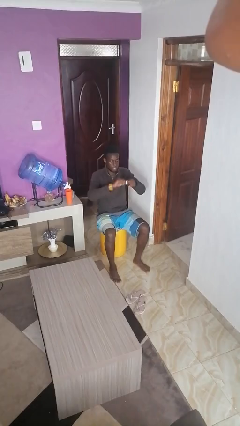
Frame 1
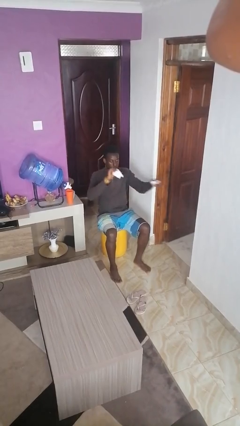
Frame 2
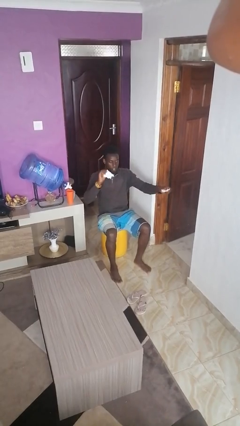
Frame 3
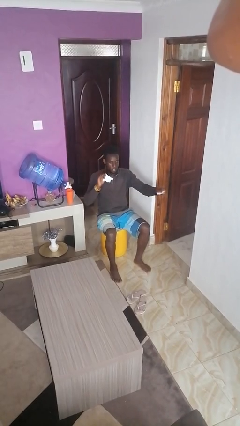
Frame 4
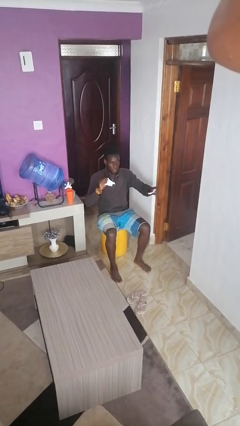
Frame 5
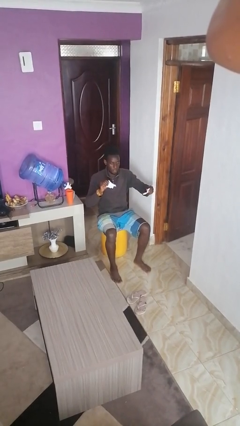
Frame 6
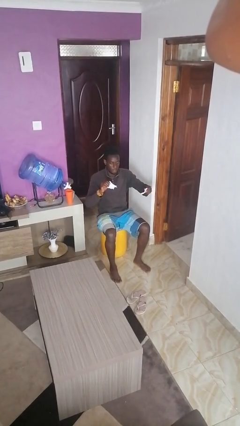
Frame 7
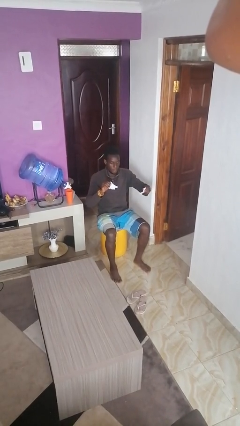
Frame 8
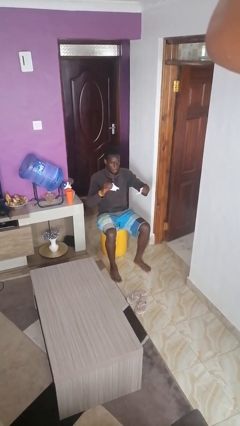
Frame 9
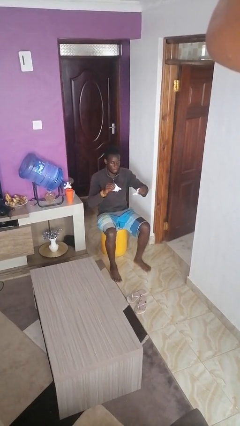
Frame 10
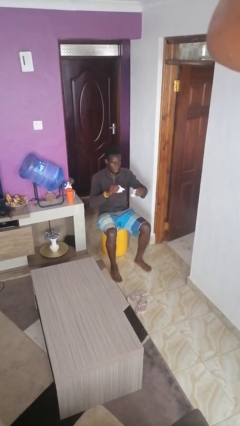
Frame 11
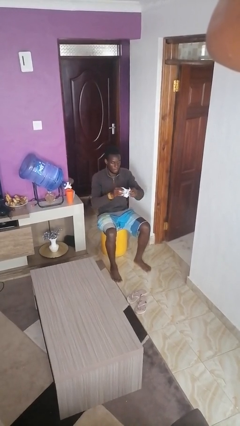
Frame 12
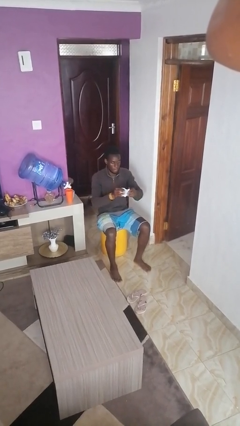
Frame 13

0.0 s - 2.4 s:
person tears paper

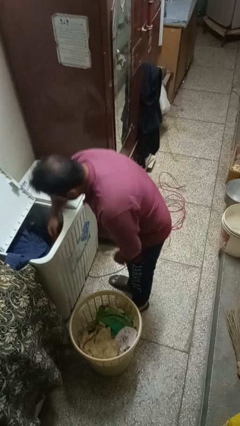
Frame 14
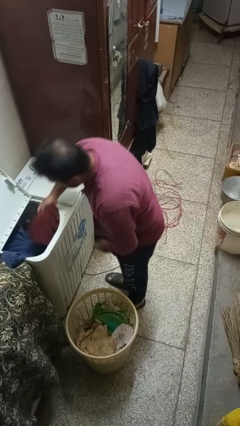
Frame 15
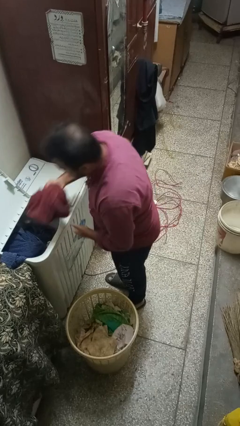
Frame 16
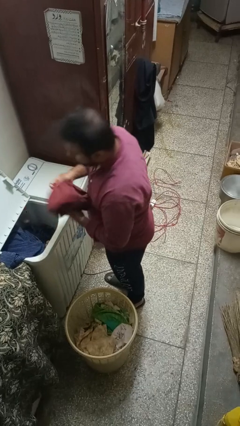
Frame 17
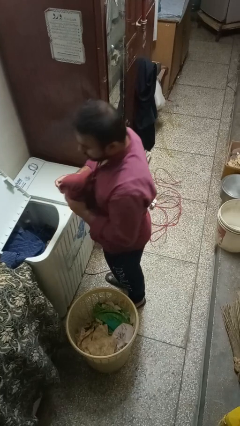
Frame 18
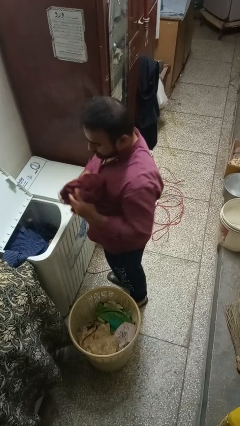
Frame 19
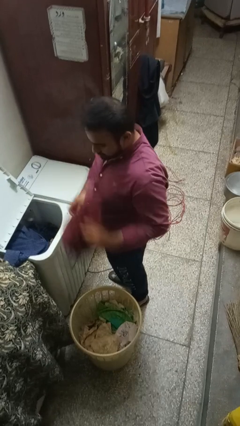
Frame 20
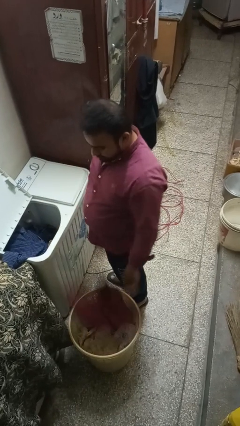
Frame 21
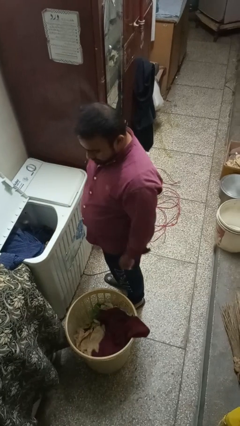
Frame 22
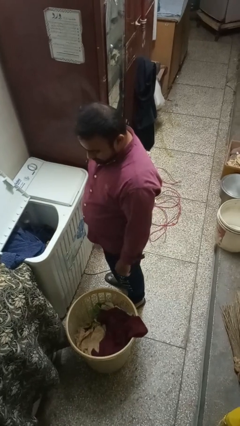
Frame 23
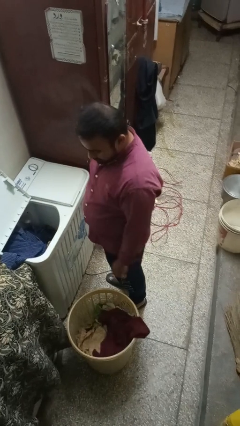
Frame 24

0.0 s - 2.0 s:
person unloads clotheswasher

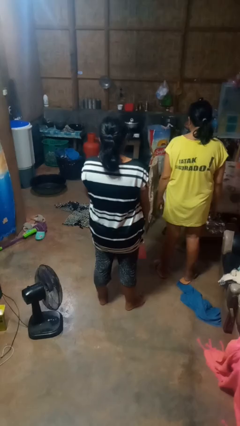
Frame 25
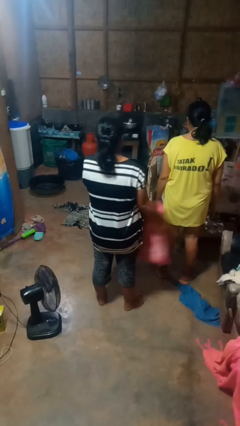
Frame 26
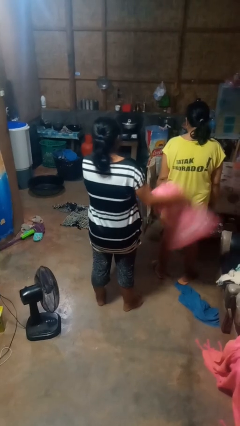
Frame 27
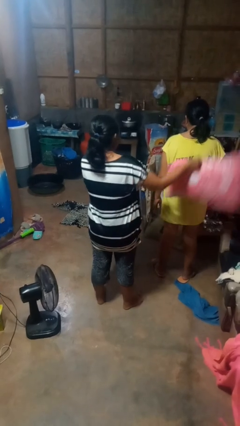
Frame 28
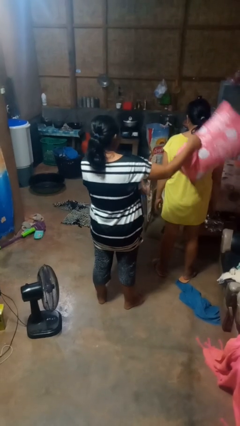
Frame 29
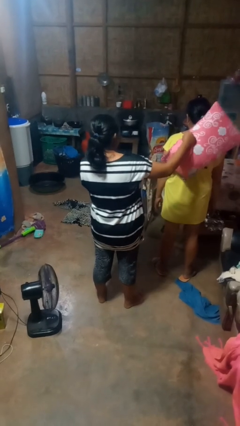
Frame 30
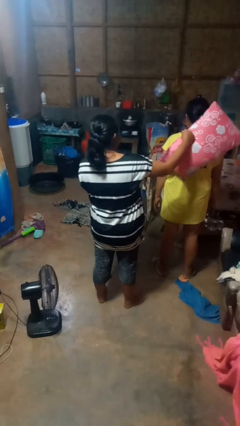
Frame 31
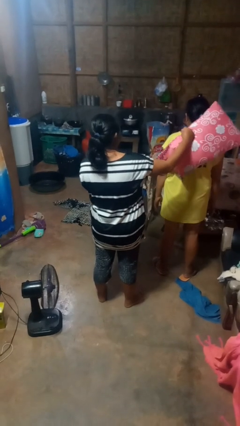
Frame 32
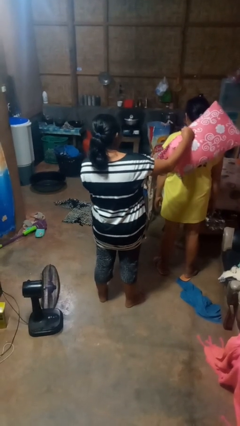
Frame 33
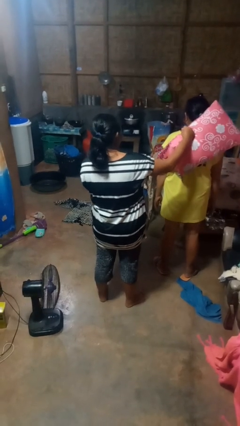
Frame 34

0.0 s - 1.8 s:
person hits person with pillow

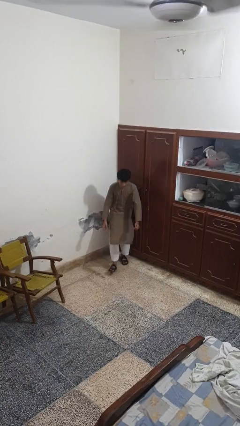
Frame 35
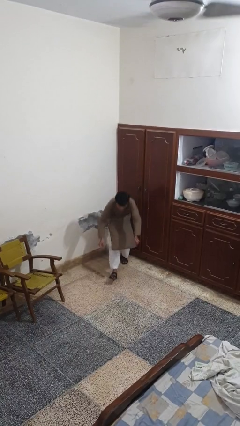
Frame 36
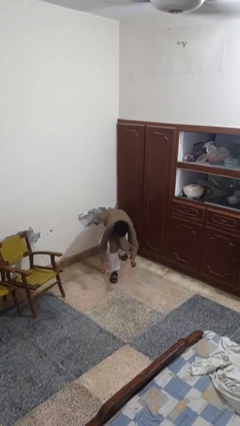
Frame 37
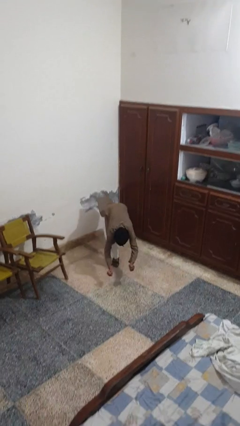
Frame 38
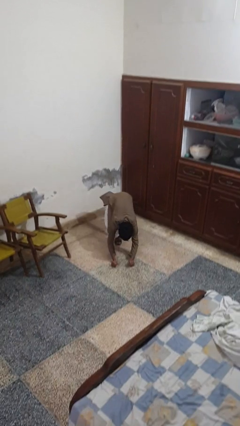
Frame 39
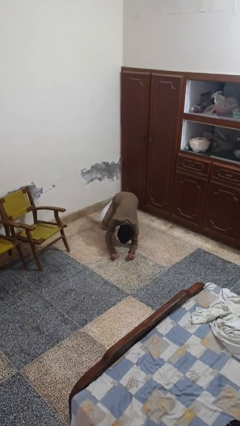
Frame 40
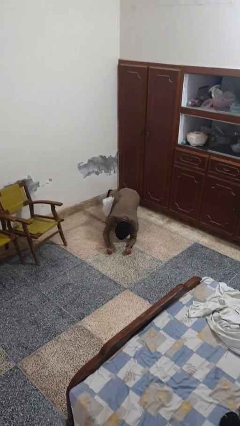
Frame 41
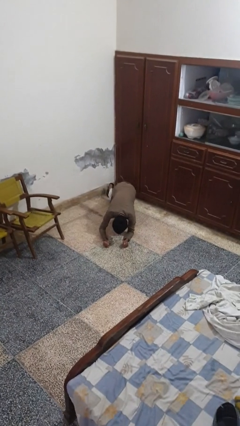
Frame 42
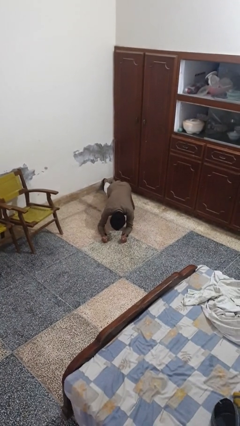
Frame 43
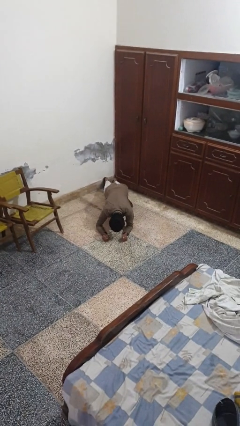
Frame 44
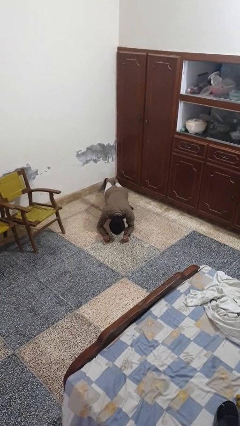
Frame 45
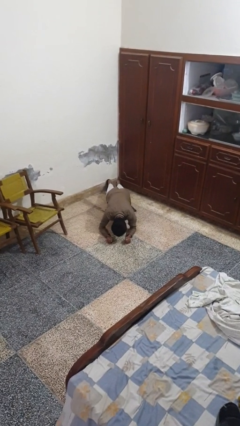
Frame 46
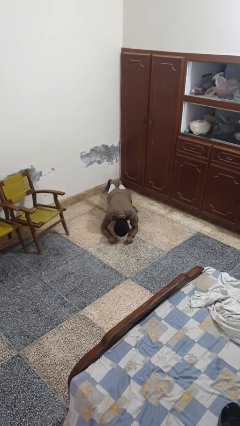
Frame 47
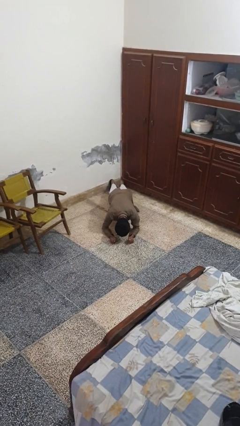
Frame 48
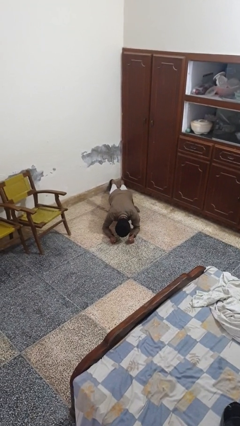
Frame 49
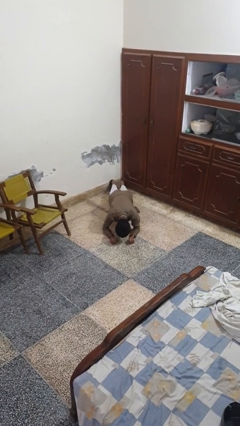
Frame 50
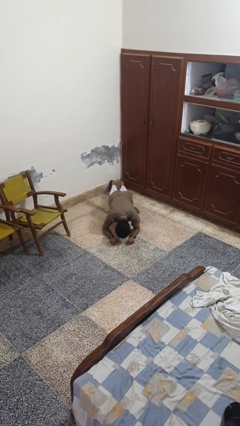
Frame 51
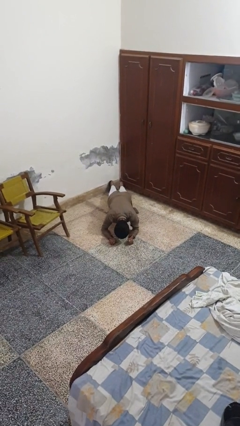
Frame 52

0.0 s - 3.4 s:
person exercises with plank

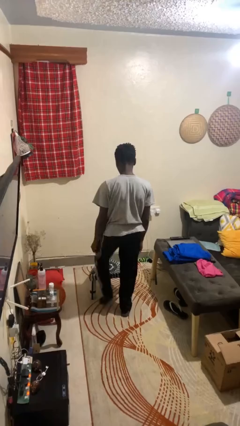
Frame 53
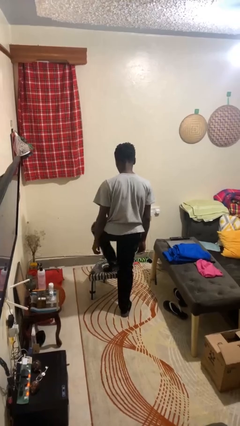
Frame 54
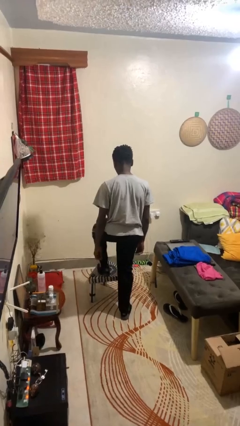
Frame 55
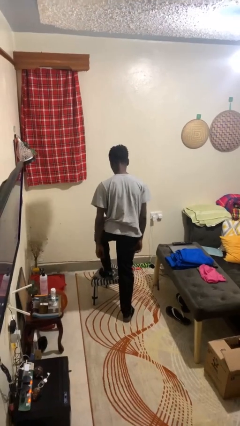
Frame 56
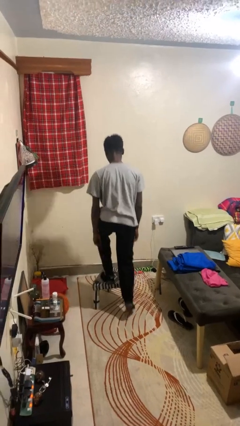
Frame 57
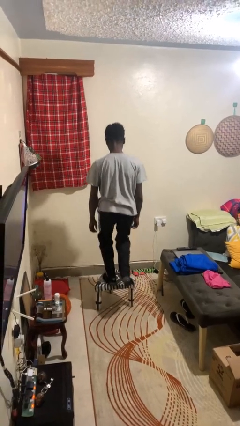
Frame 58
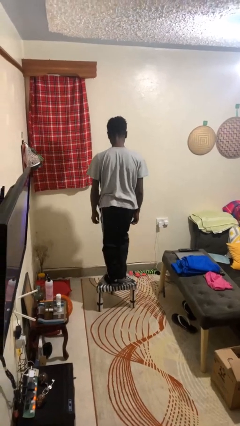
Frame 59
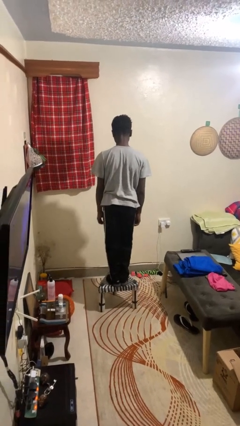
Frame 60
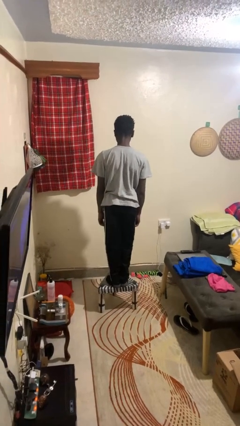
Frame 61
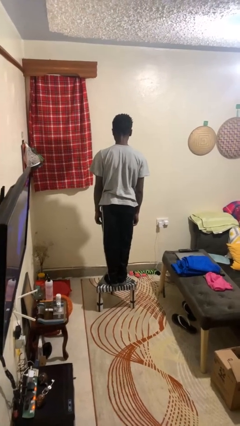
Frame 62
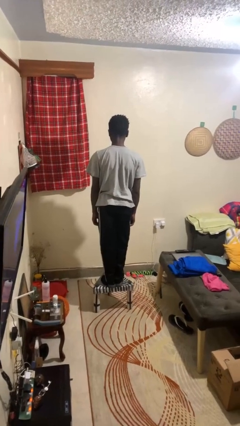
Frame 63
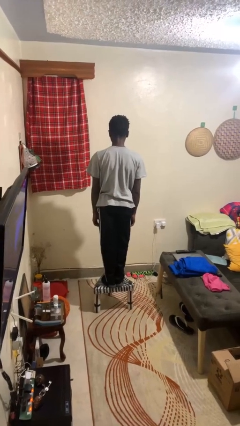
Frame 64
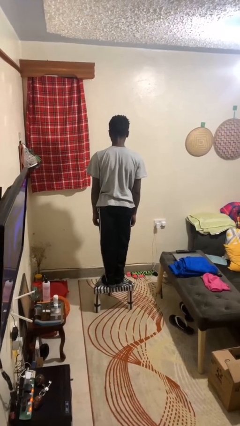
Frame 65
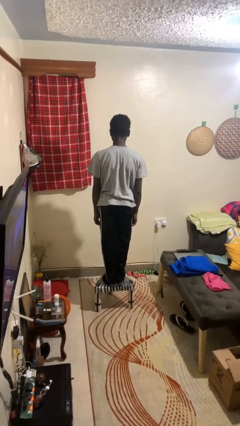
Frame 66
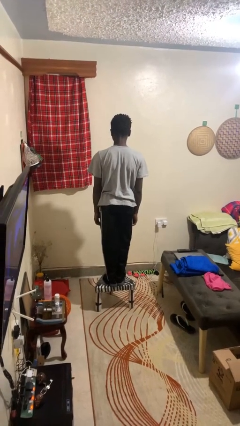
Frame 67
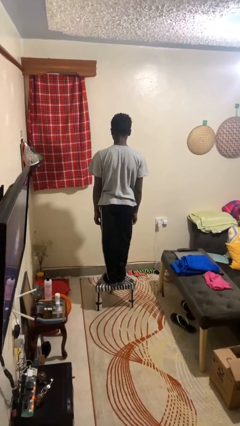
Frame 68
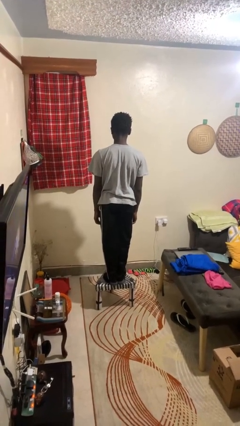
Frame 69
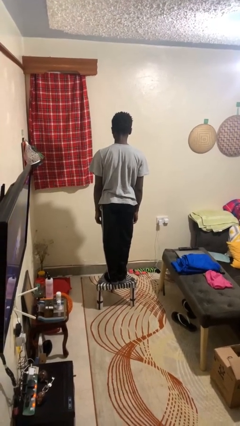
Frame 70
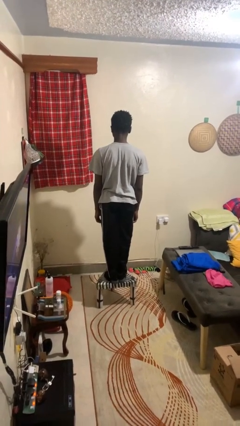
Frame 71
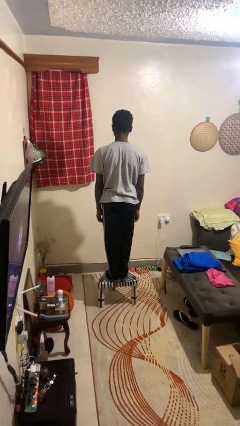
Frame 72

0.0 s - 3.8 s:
person climbs on chair

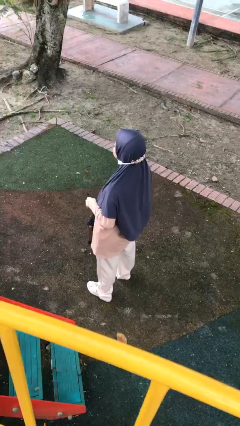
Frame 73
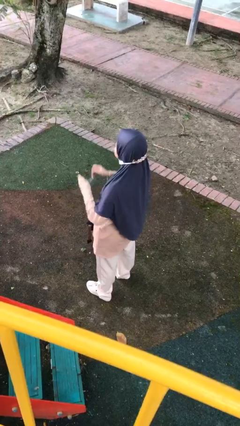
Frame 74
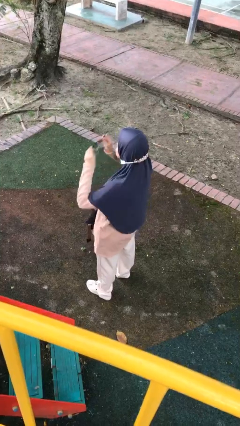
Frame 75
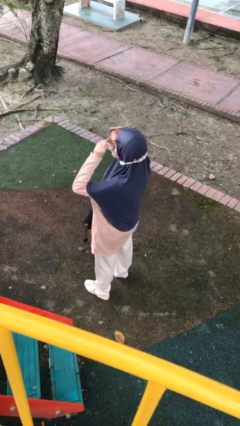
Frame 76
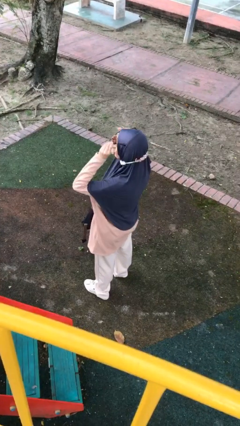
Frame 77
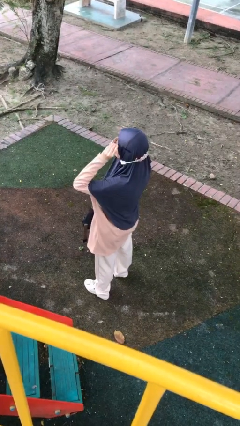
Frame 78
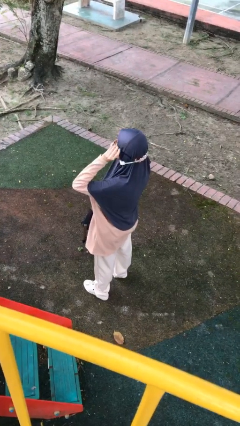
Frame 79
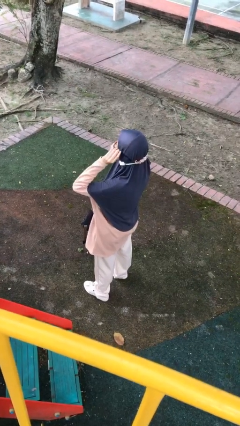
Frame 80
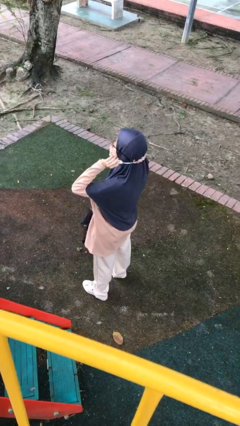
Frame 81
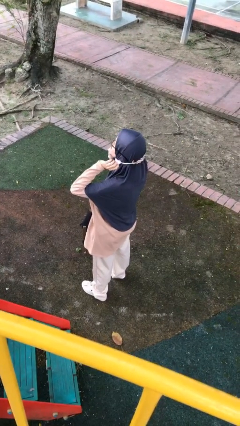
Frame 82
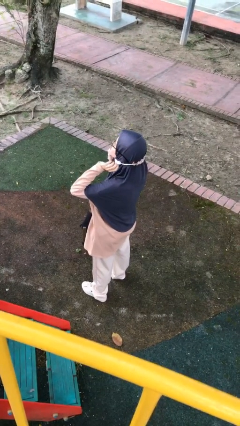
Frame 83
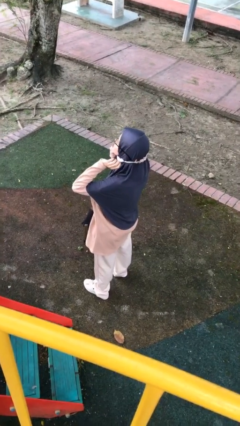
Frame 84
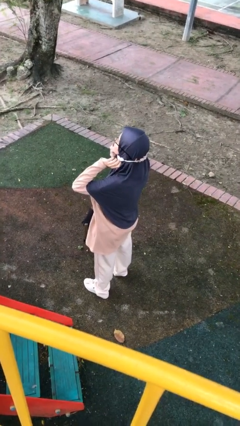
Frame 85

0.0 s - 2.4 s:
person puts on glasses

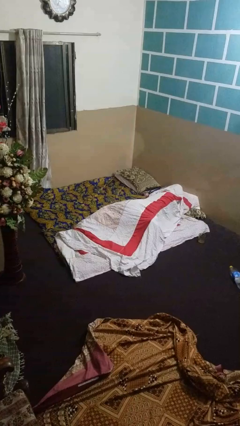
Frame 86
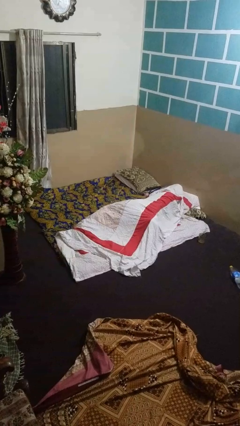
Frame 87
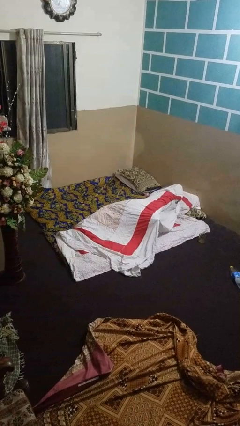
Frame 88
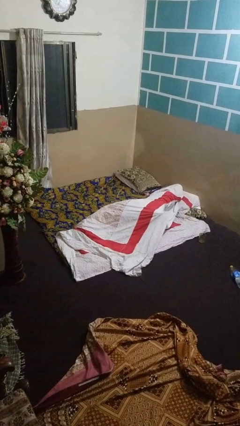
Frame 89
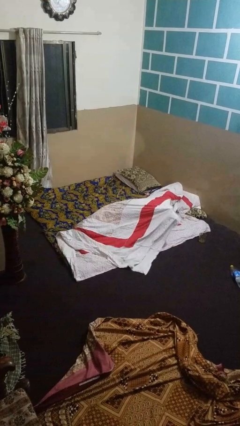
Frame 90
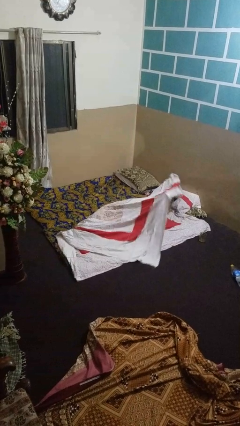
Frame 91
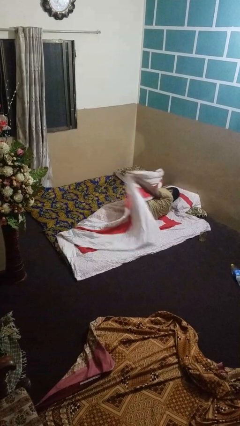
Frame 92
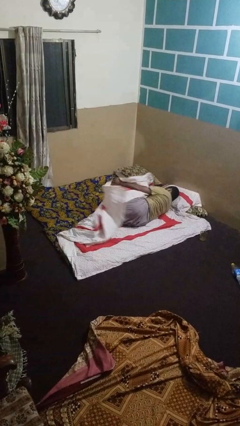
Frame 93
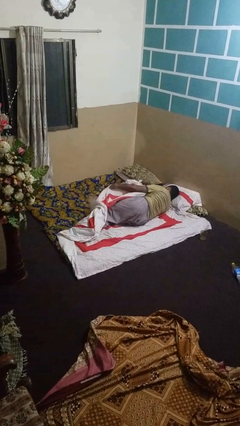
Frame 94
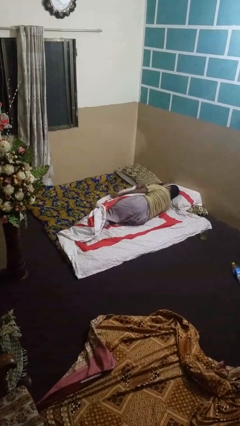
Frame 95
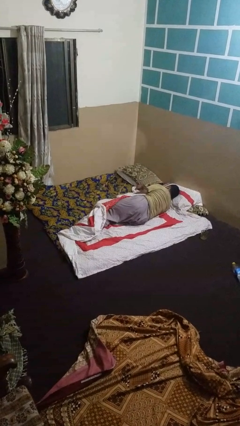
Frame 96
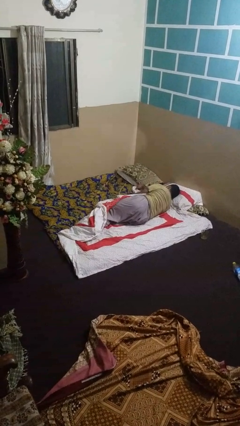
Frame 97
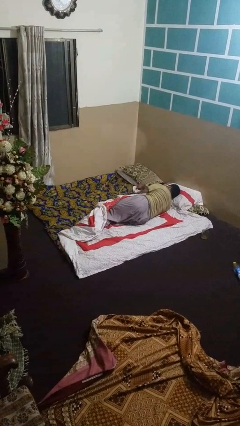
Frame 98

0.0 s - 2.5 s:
person uncovers with bedsheets
